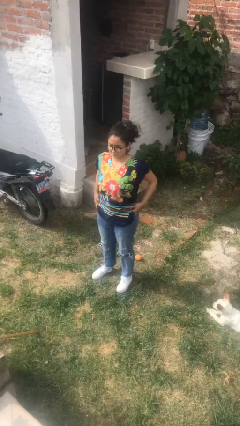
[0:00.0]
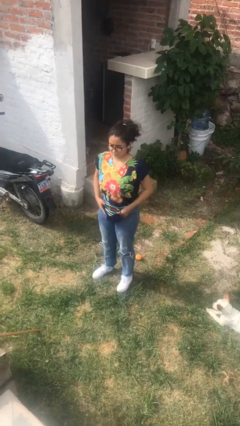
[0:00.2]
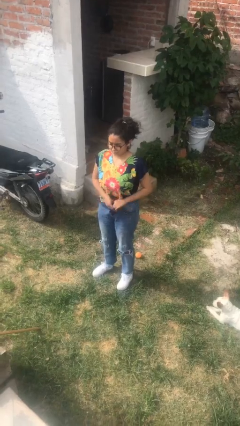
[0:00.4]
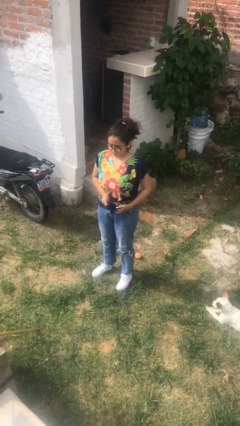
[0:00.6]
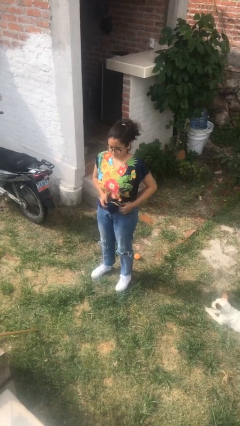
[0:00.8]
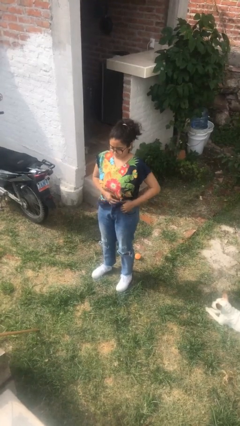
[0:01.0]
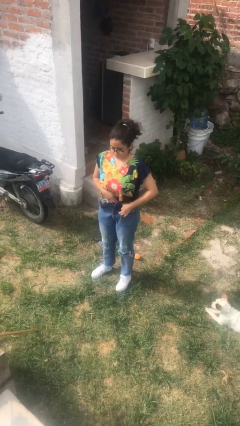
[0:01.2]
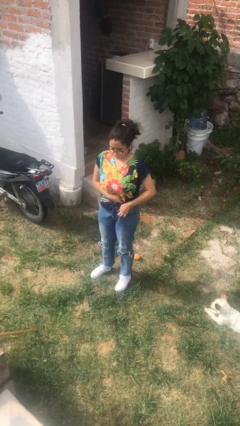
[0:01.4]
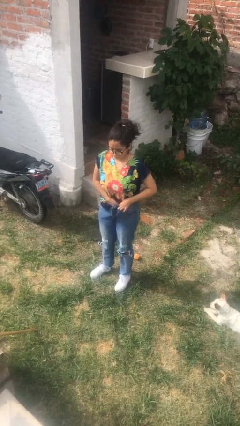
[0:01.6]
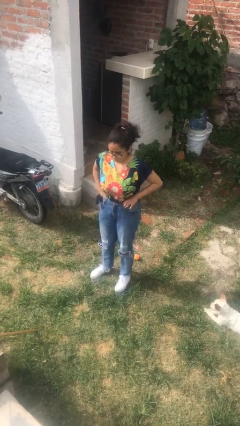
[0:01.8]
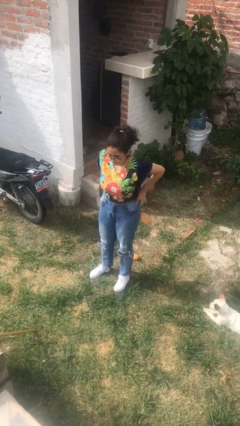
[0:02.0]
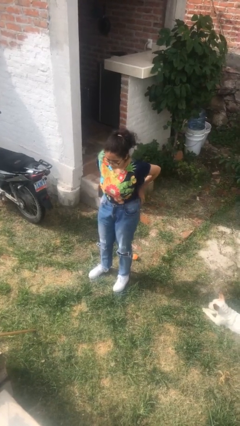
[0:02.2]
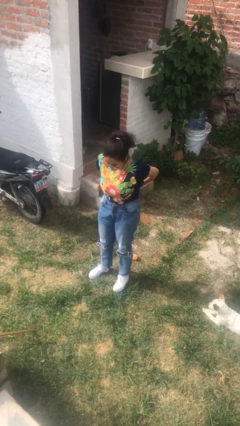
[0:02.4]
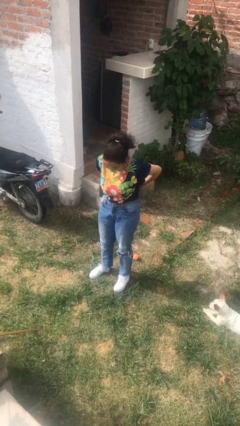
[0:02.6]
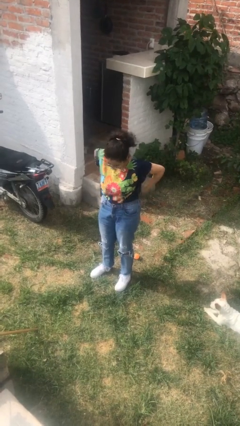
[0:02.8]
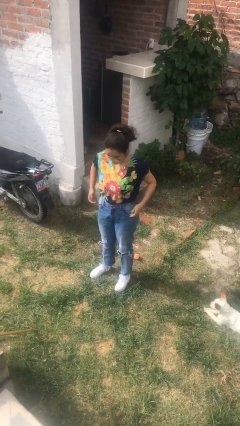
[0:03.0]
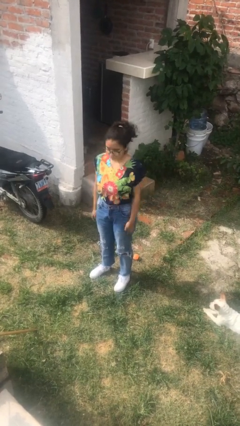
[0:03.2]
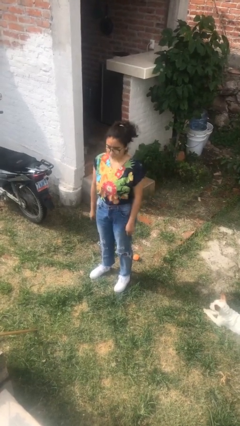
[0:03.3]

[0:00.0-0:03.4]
person tucks in shirt

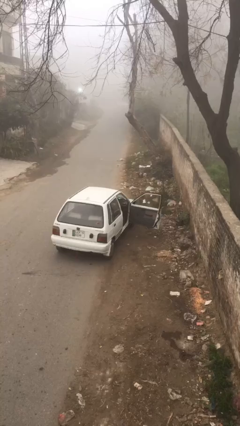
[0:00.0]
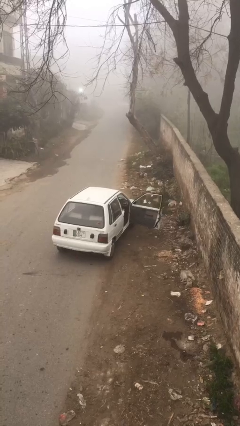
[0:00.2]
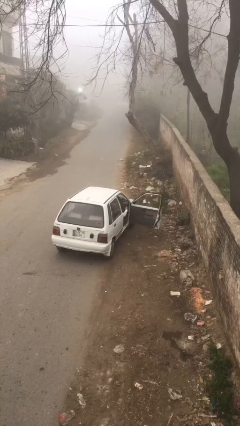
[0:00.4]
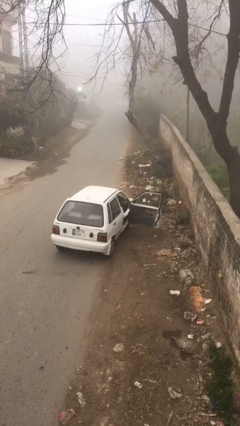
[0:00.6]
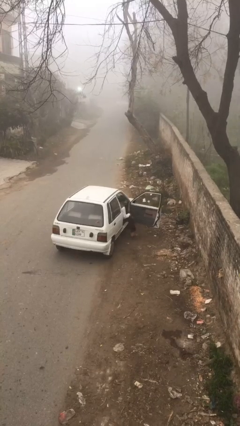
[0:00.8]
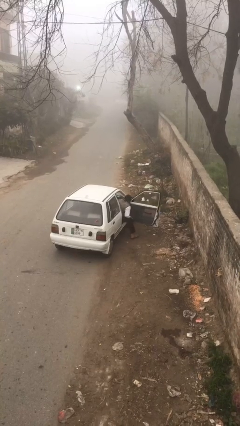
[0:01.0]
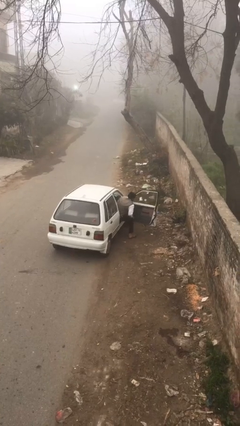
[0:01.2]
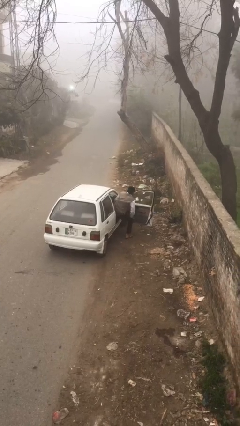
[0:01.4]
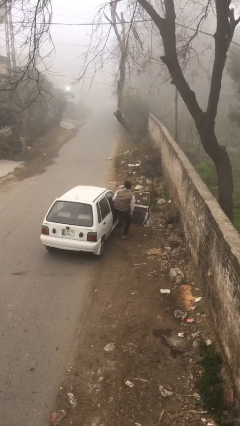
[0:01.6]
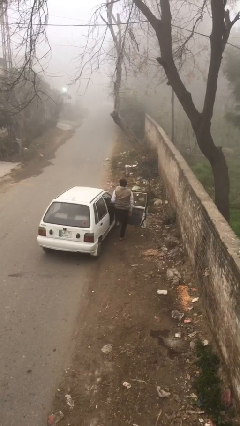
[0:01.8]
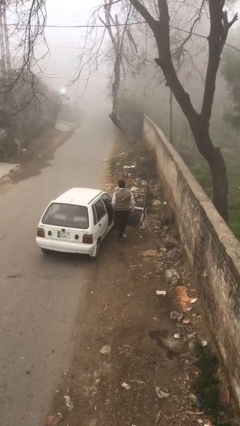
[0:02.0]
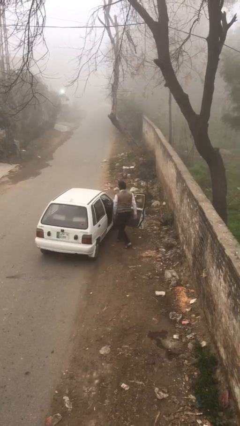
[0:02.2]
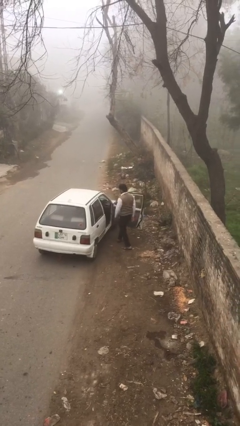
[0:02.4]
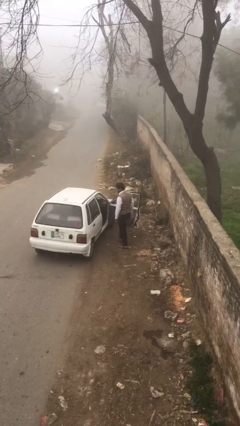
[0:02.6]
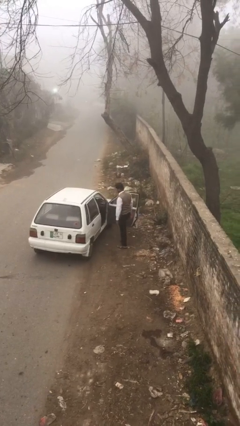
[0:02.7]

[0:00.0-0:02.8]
person exits car

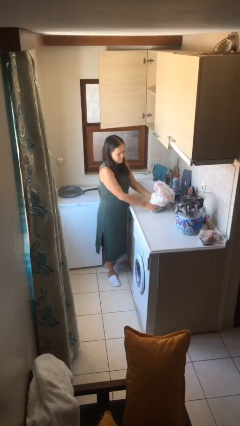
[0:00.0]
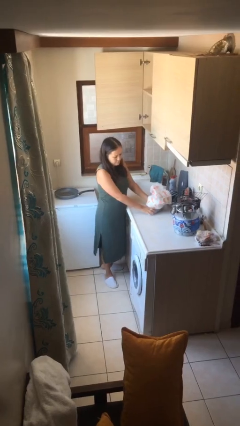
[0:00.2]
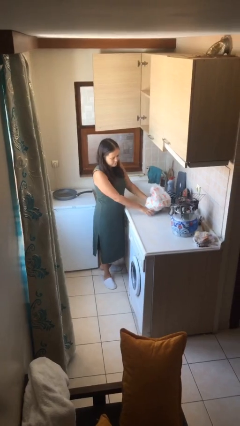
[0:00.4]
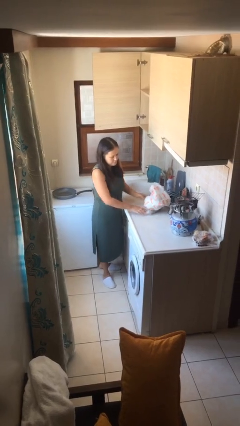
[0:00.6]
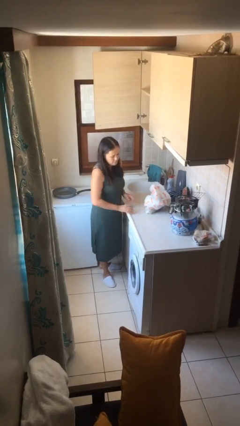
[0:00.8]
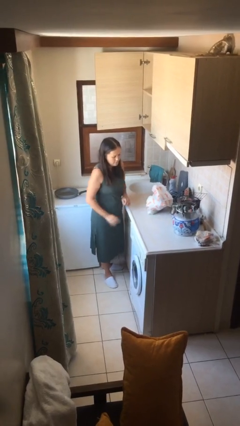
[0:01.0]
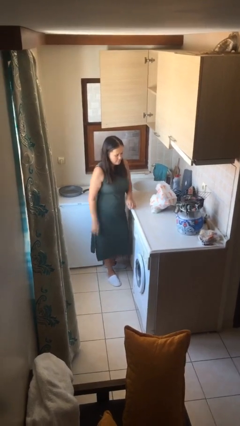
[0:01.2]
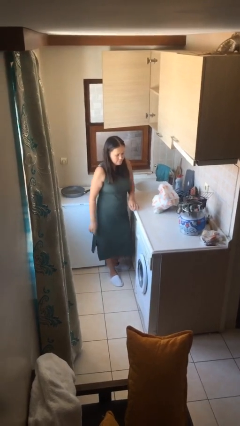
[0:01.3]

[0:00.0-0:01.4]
person puts down object on table

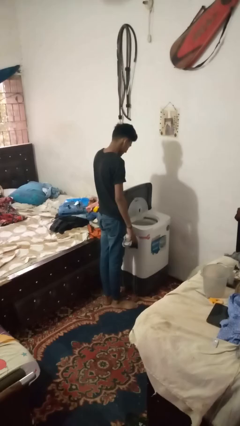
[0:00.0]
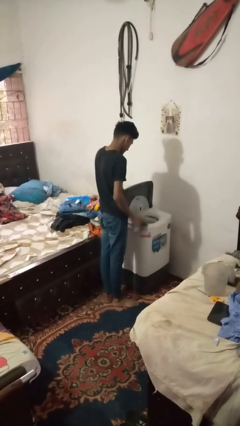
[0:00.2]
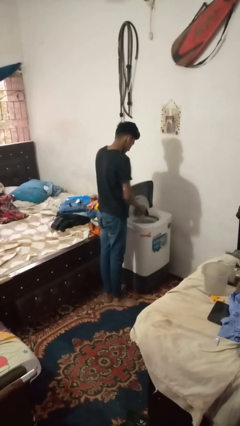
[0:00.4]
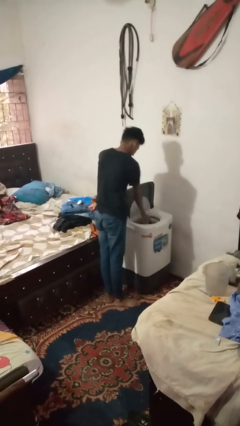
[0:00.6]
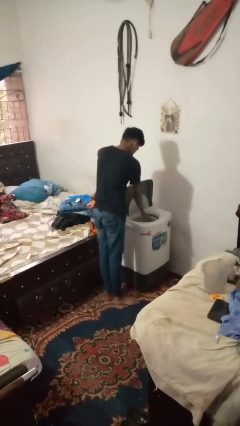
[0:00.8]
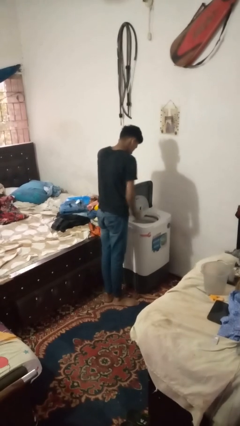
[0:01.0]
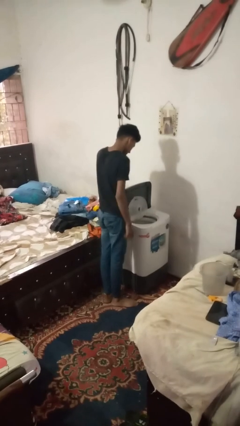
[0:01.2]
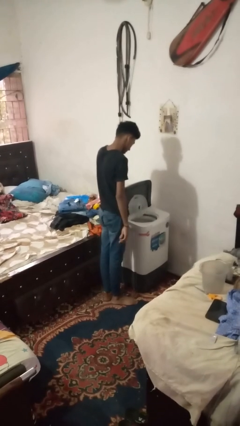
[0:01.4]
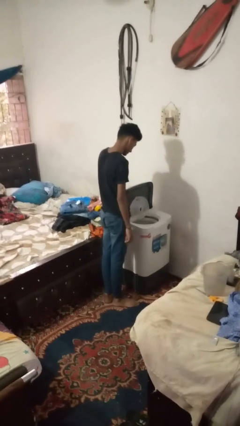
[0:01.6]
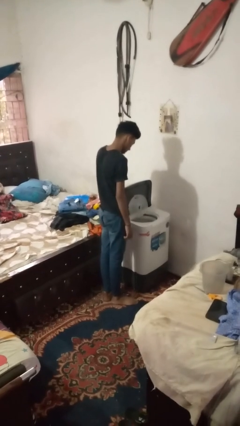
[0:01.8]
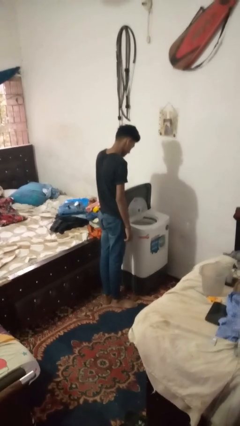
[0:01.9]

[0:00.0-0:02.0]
person loads dryer

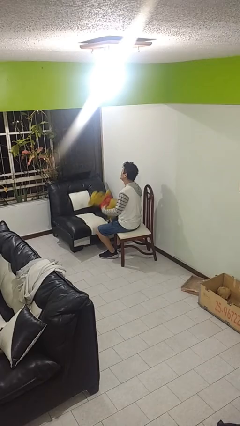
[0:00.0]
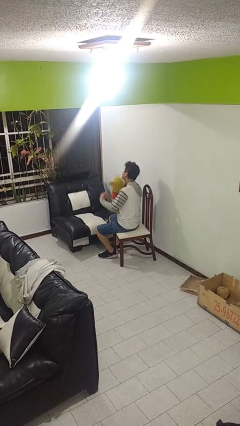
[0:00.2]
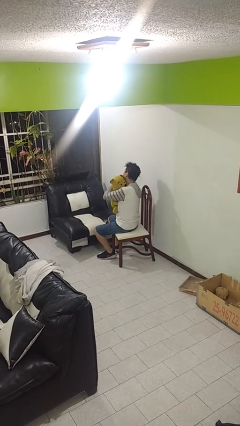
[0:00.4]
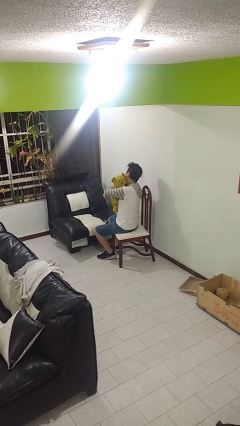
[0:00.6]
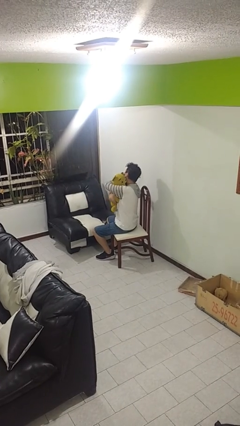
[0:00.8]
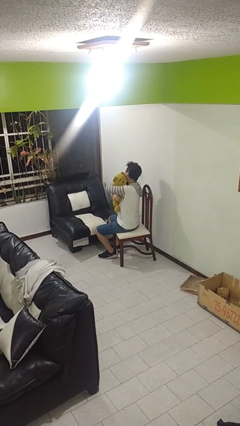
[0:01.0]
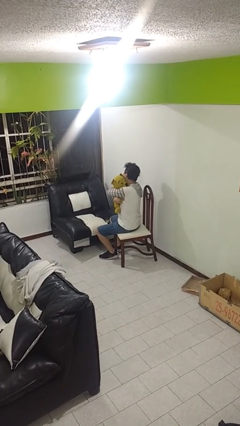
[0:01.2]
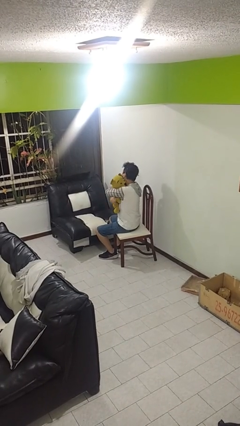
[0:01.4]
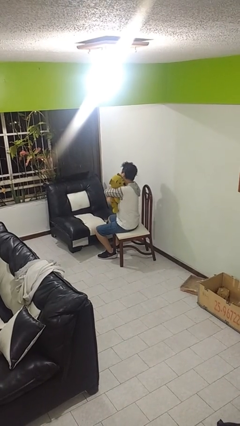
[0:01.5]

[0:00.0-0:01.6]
person hugs stuffed animal

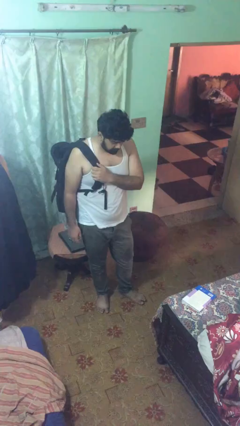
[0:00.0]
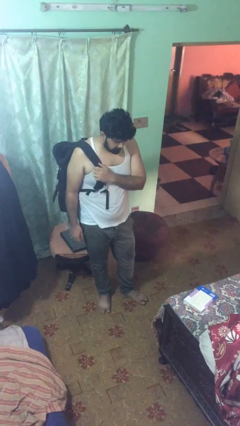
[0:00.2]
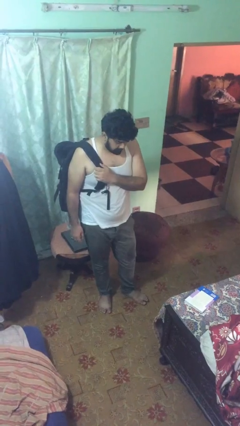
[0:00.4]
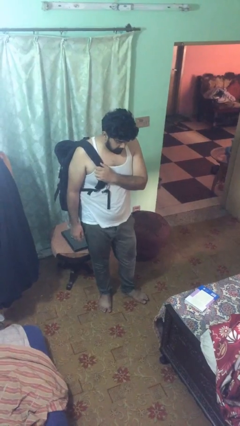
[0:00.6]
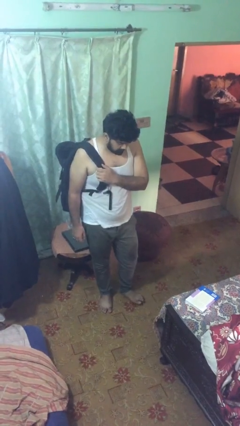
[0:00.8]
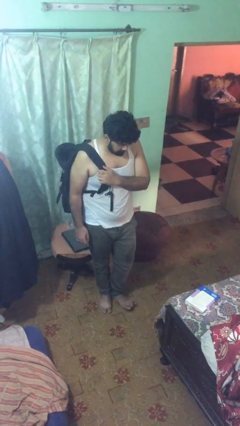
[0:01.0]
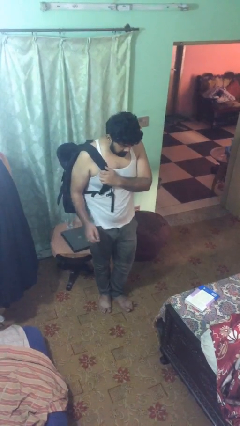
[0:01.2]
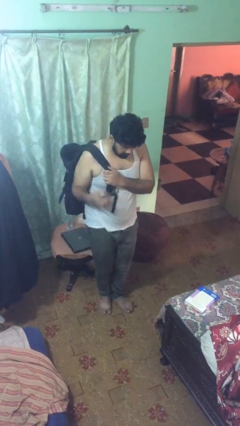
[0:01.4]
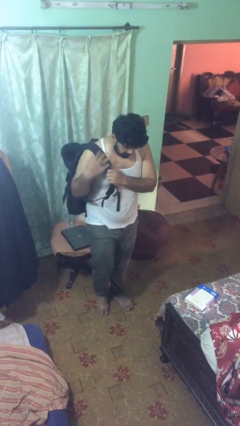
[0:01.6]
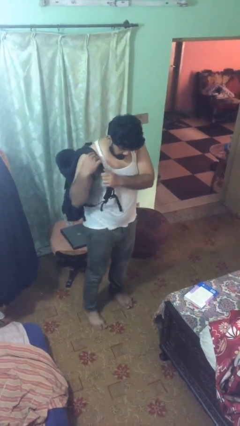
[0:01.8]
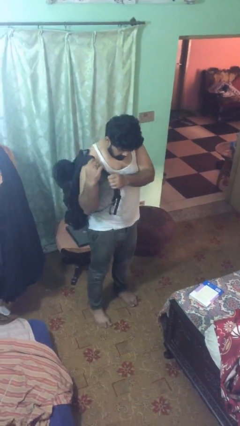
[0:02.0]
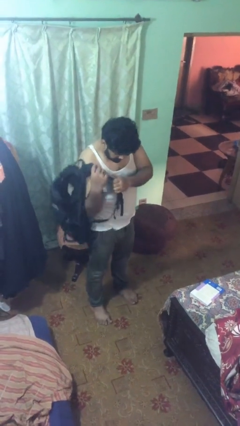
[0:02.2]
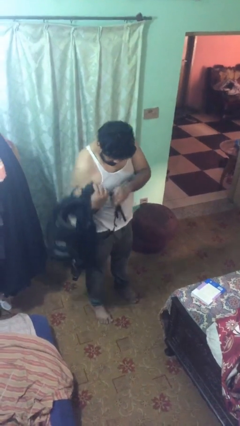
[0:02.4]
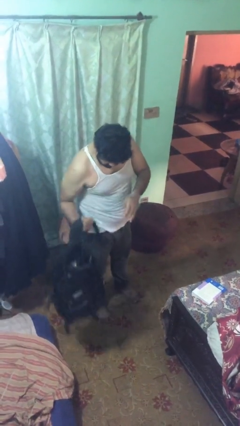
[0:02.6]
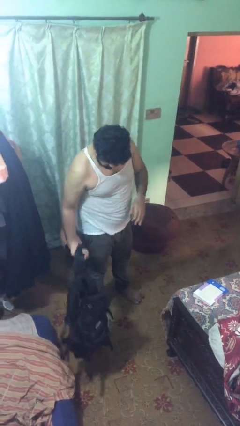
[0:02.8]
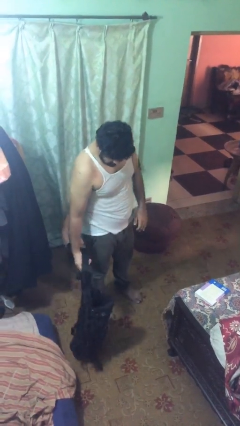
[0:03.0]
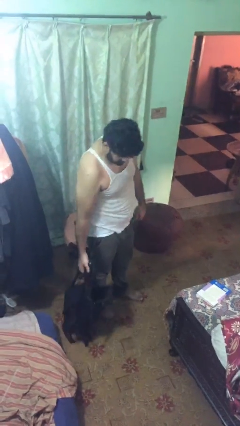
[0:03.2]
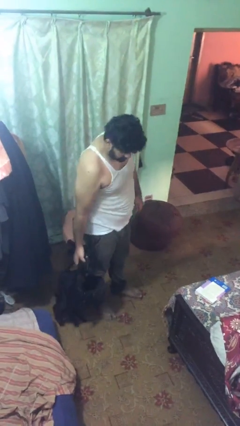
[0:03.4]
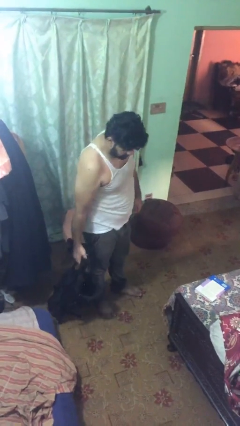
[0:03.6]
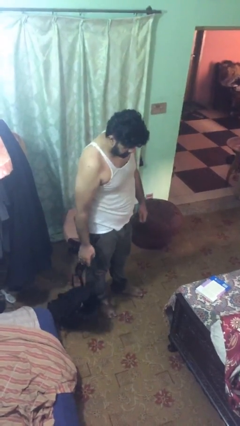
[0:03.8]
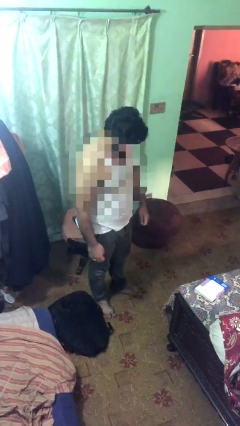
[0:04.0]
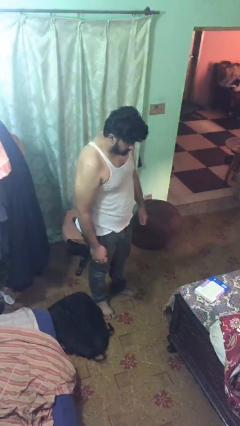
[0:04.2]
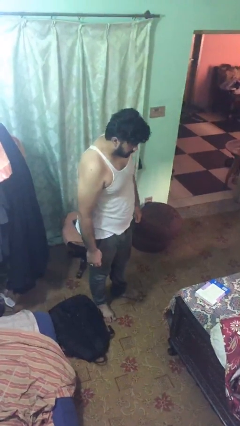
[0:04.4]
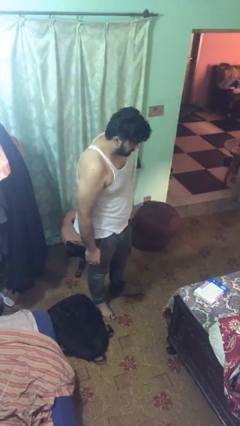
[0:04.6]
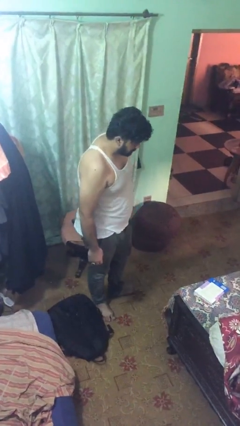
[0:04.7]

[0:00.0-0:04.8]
person puts down object on floor

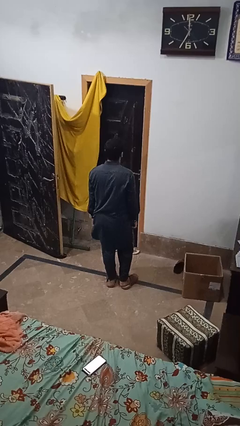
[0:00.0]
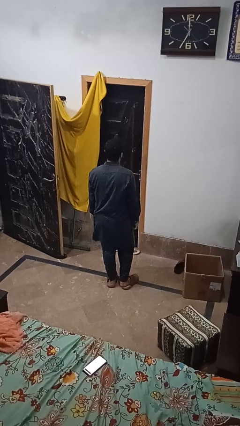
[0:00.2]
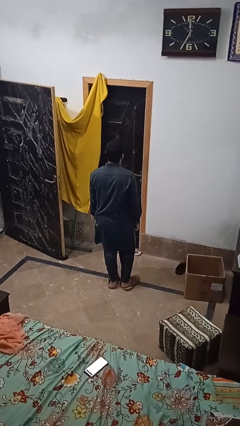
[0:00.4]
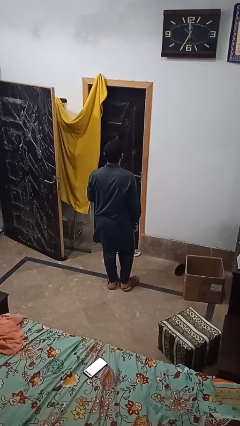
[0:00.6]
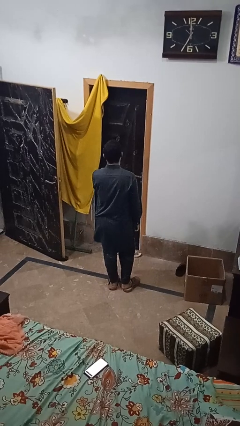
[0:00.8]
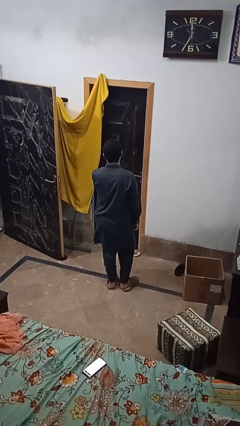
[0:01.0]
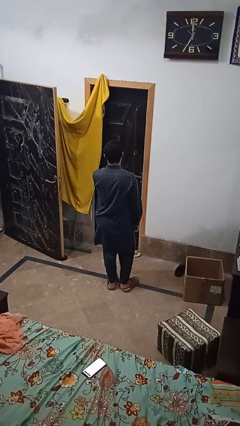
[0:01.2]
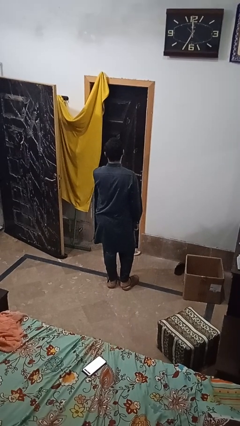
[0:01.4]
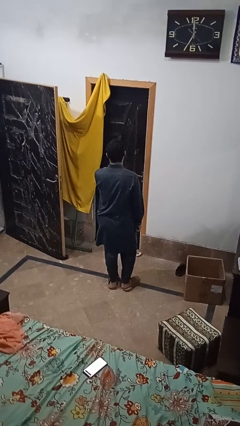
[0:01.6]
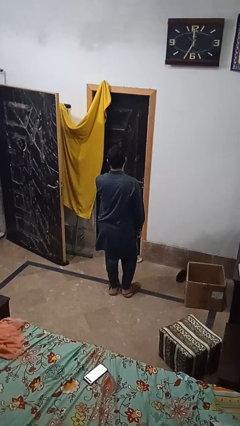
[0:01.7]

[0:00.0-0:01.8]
person gestures be quiet
